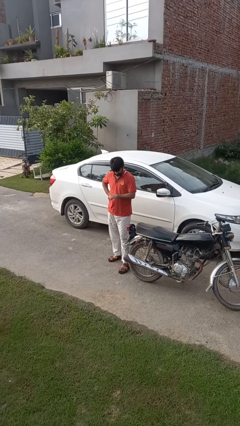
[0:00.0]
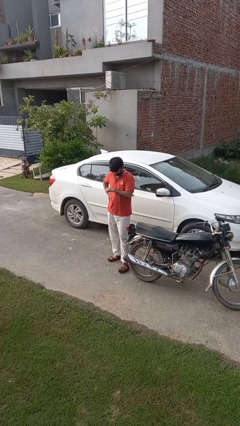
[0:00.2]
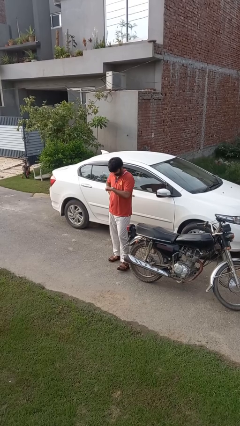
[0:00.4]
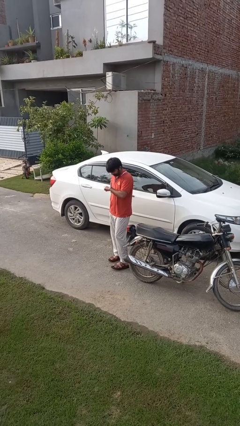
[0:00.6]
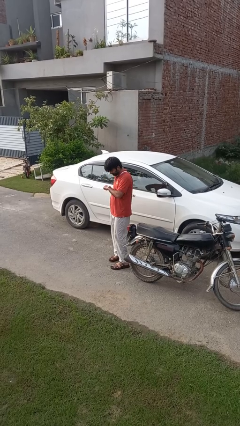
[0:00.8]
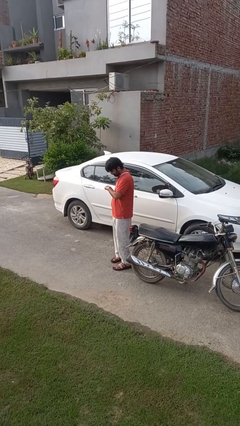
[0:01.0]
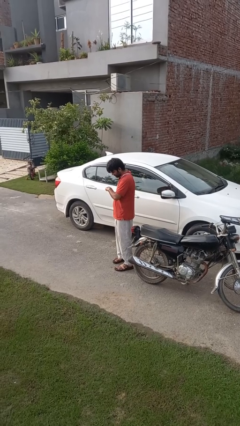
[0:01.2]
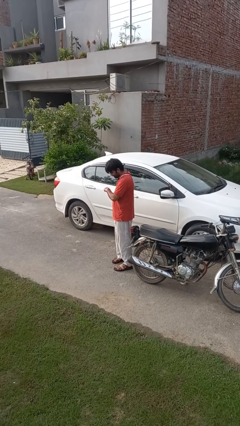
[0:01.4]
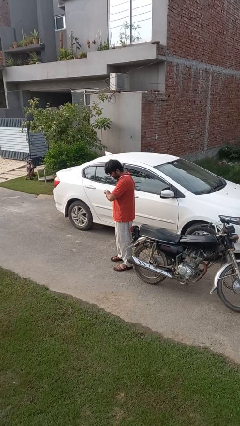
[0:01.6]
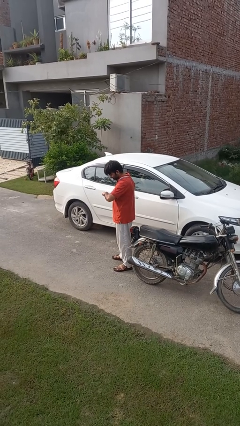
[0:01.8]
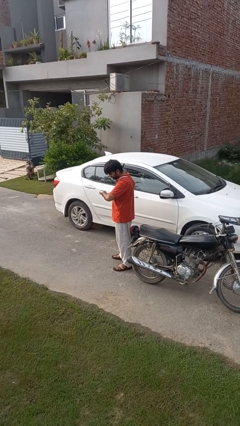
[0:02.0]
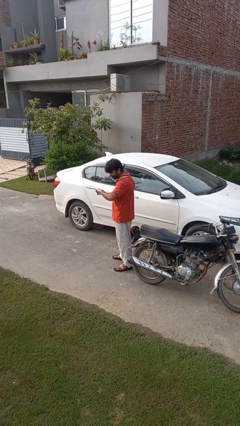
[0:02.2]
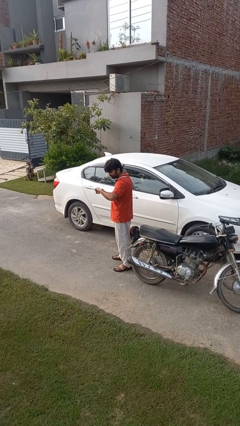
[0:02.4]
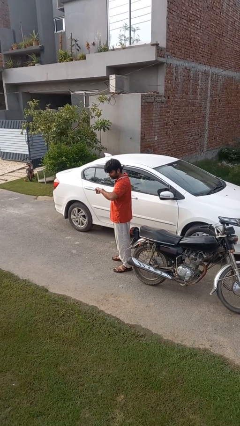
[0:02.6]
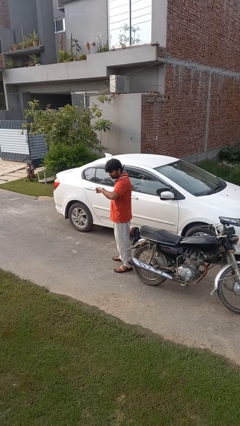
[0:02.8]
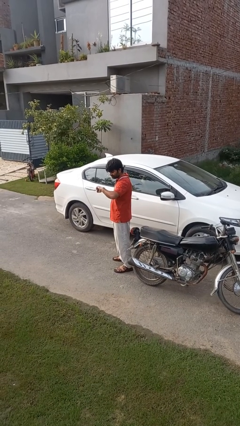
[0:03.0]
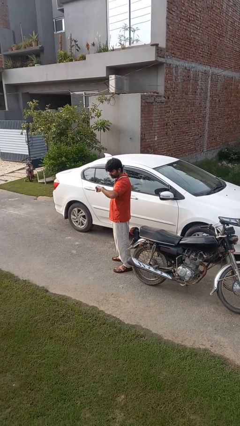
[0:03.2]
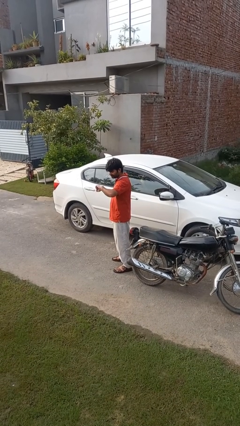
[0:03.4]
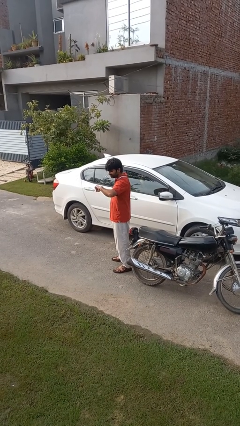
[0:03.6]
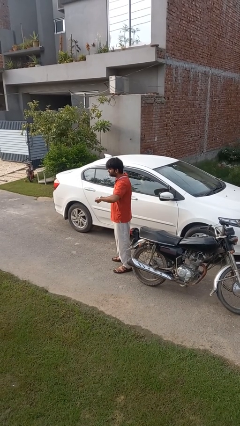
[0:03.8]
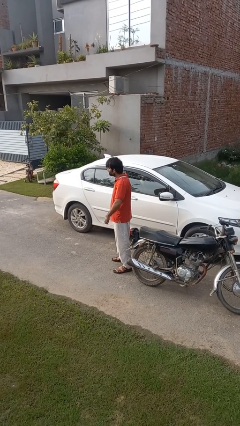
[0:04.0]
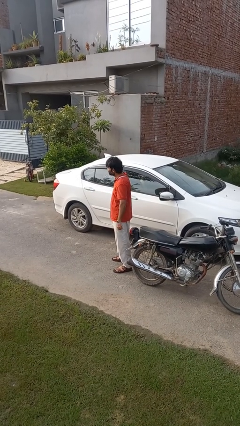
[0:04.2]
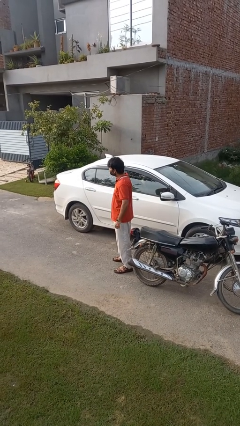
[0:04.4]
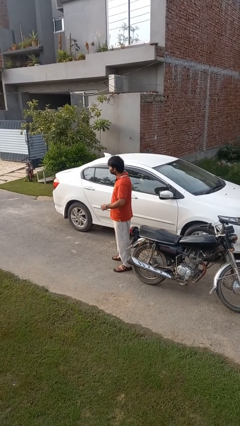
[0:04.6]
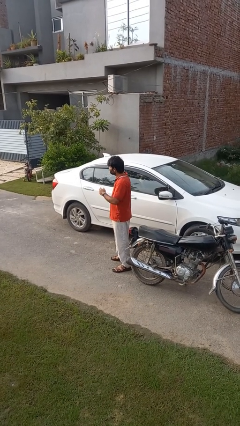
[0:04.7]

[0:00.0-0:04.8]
person looks at wristwatch

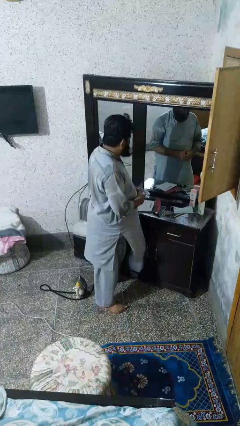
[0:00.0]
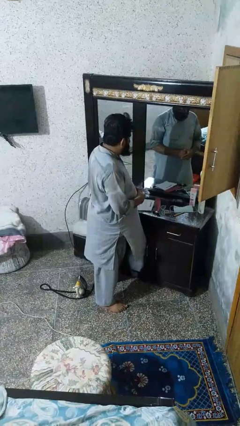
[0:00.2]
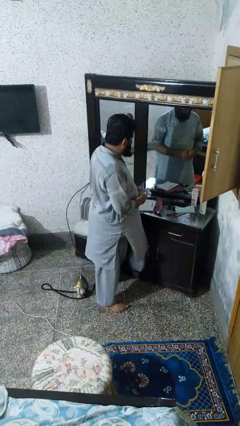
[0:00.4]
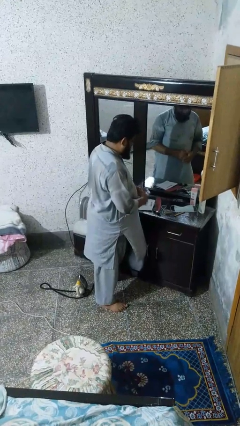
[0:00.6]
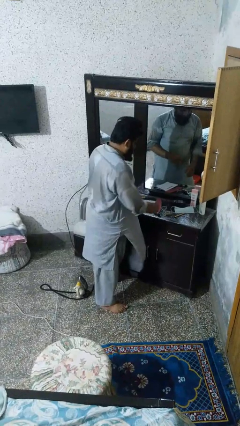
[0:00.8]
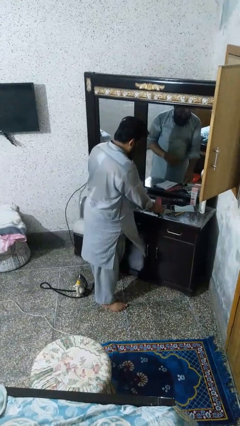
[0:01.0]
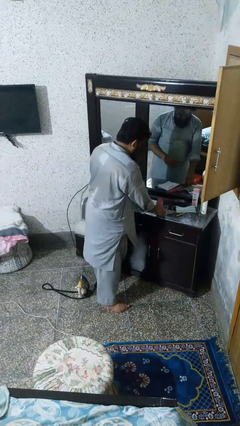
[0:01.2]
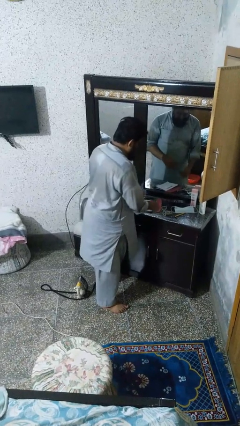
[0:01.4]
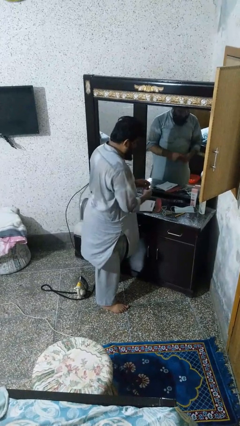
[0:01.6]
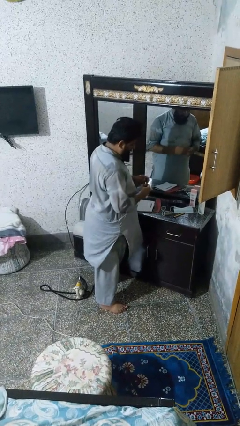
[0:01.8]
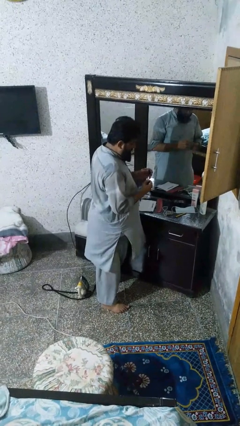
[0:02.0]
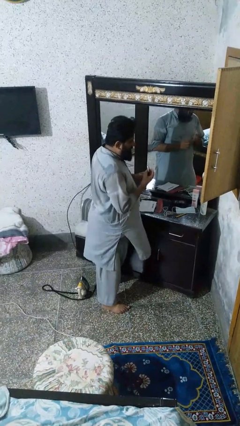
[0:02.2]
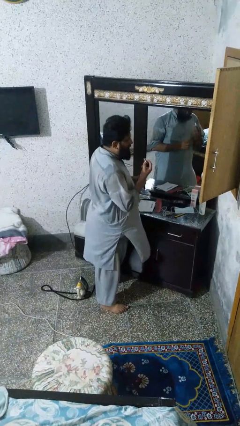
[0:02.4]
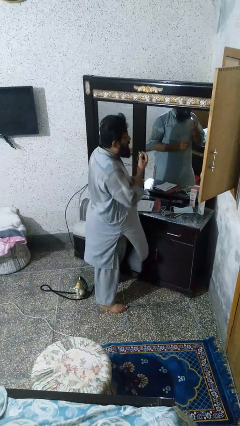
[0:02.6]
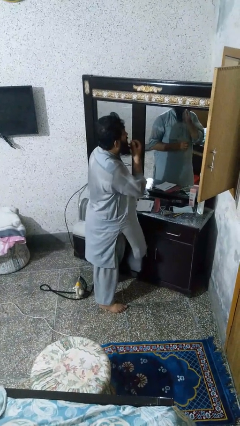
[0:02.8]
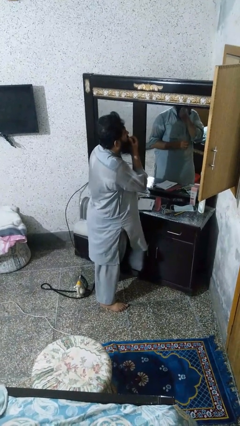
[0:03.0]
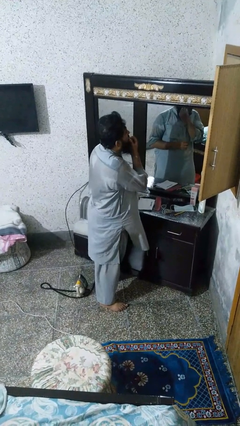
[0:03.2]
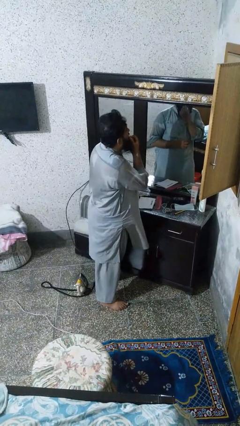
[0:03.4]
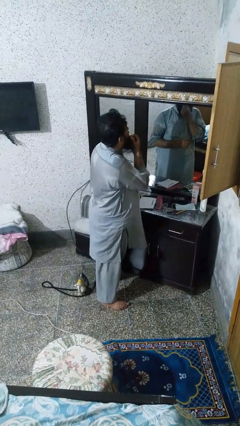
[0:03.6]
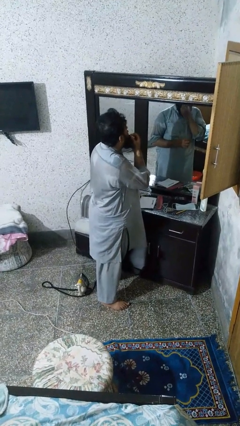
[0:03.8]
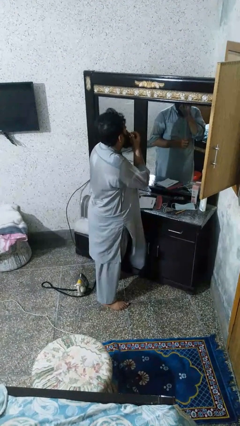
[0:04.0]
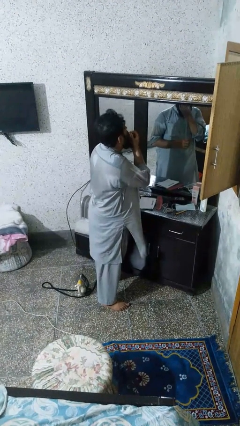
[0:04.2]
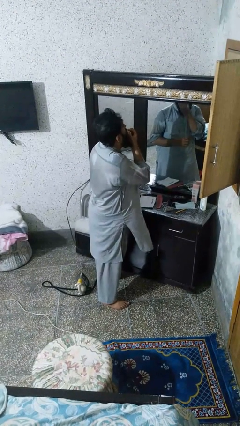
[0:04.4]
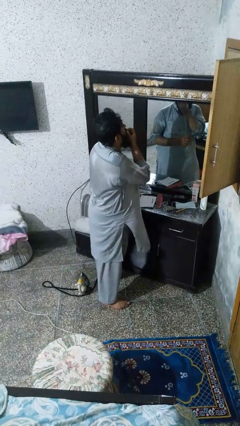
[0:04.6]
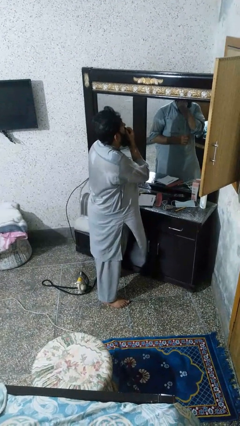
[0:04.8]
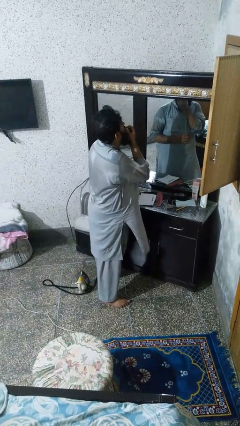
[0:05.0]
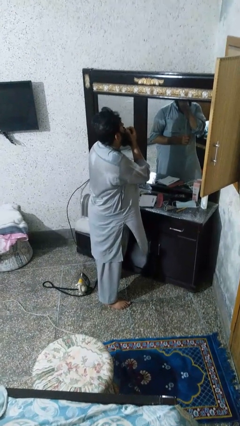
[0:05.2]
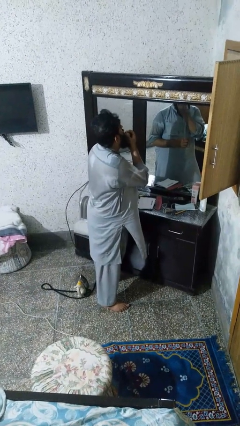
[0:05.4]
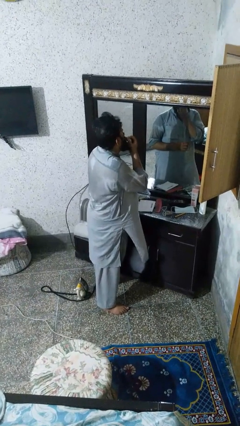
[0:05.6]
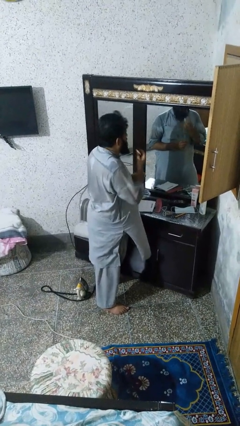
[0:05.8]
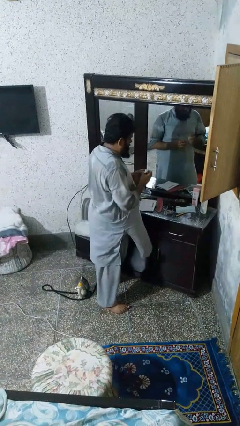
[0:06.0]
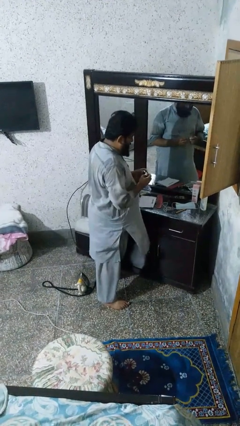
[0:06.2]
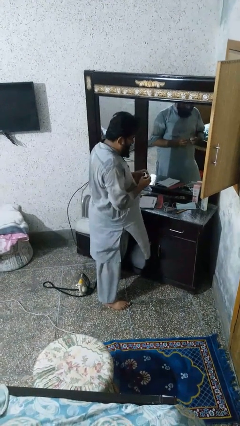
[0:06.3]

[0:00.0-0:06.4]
person applies lip makeup

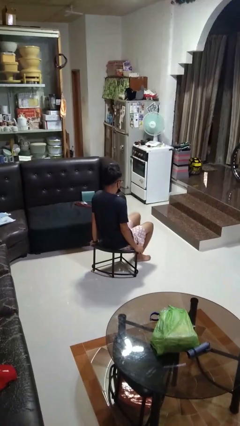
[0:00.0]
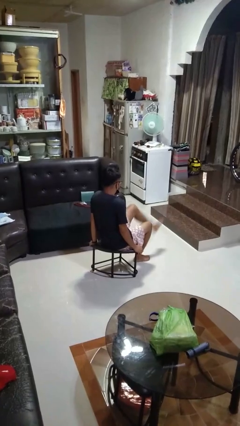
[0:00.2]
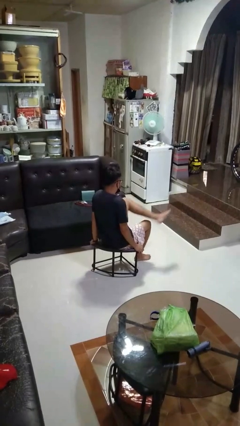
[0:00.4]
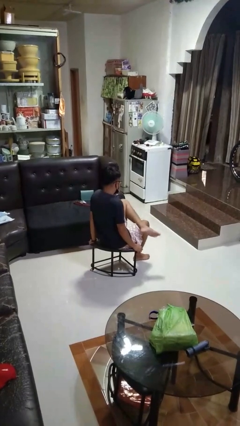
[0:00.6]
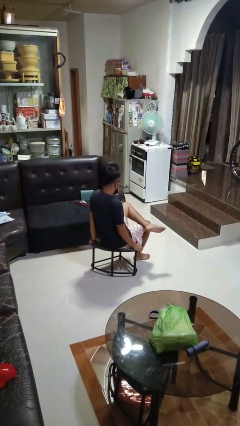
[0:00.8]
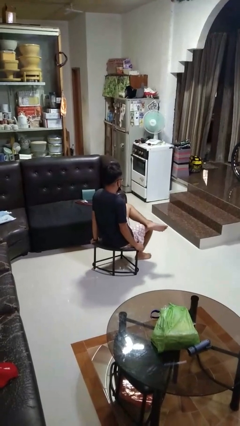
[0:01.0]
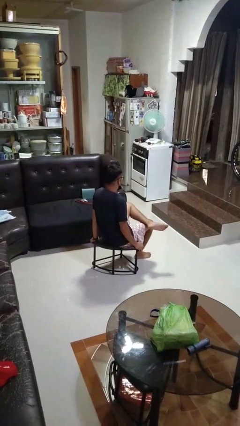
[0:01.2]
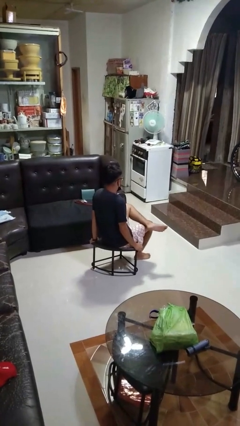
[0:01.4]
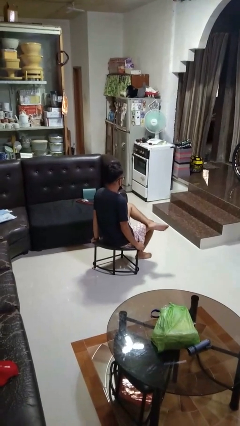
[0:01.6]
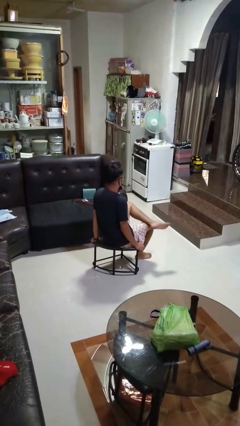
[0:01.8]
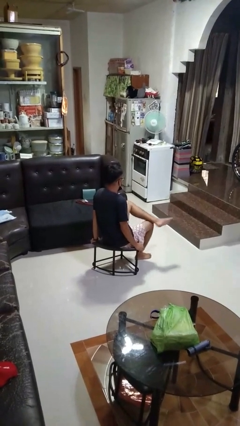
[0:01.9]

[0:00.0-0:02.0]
person crosses legs

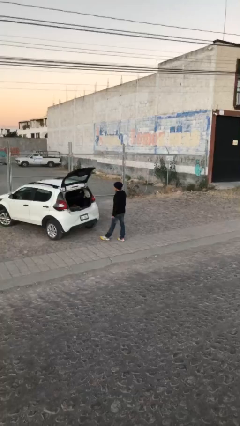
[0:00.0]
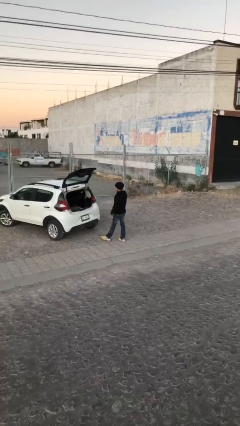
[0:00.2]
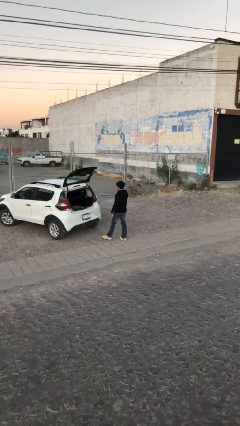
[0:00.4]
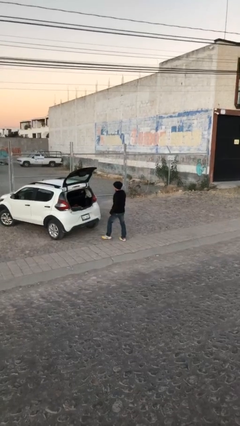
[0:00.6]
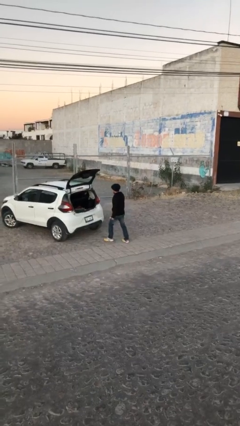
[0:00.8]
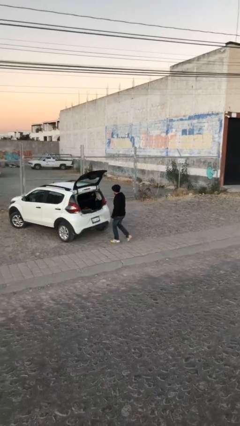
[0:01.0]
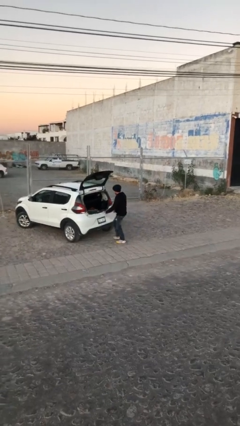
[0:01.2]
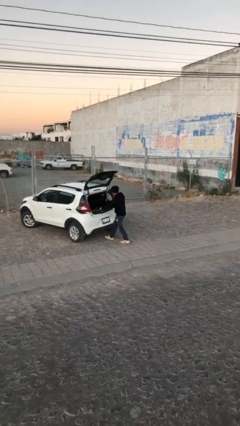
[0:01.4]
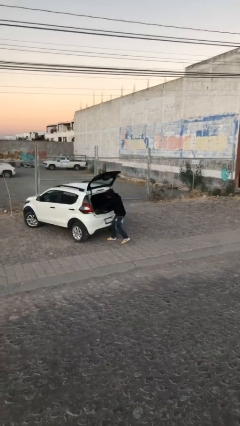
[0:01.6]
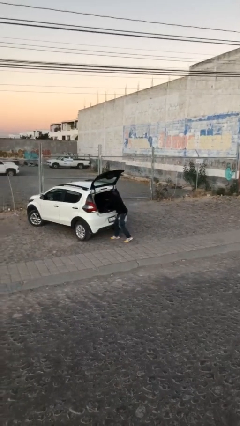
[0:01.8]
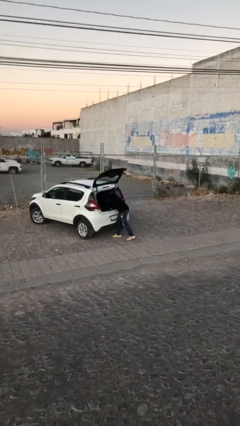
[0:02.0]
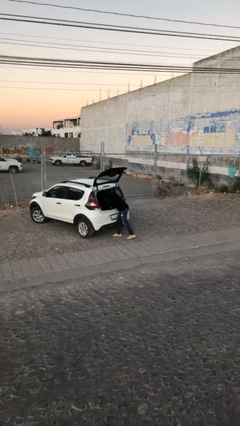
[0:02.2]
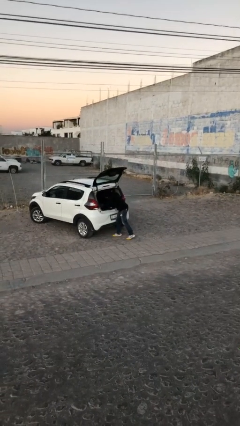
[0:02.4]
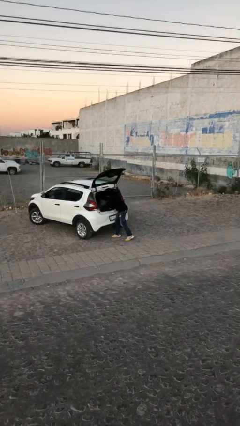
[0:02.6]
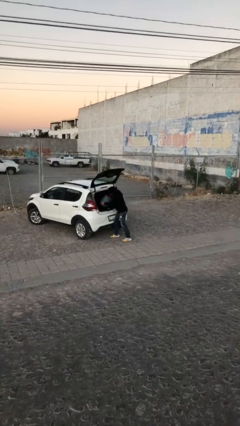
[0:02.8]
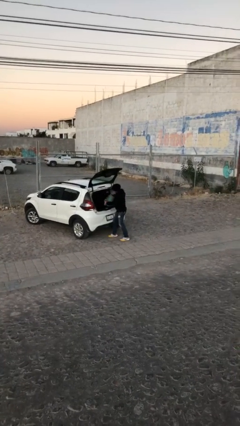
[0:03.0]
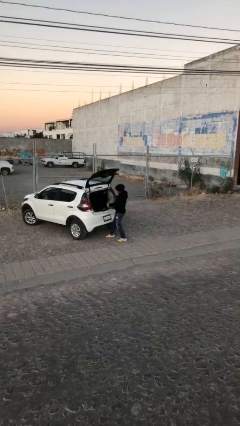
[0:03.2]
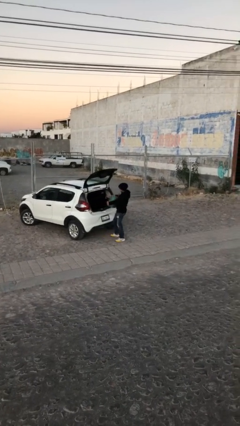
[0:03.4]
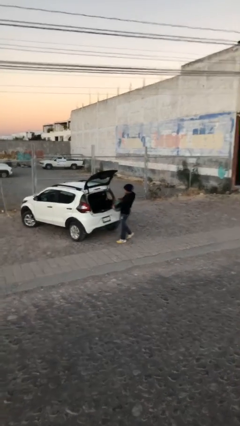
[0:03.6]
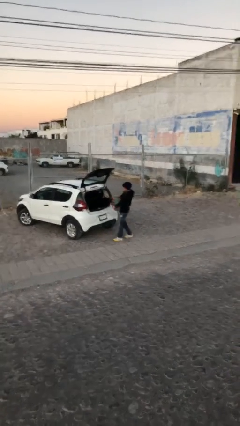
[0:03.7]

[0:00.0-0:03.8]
person unloads car

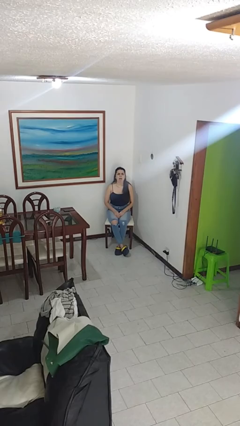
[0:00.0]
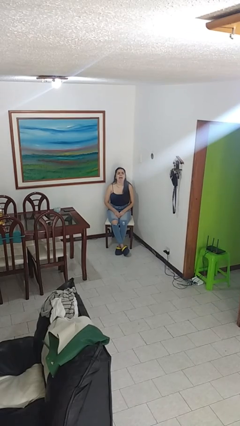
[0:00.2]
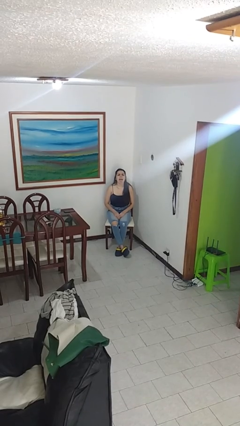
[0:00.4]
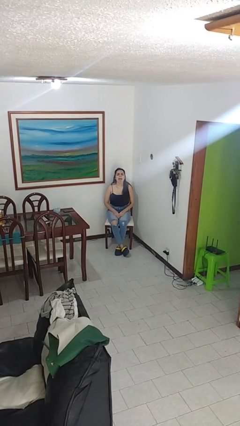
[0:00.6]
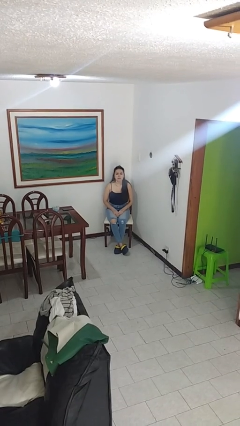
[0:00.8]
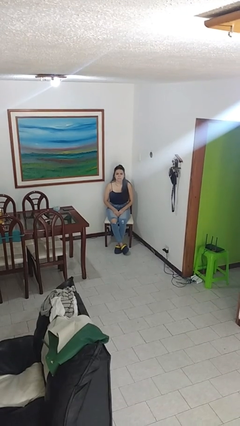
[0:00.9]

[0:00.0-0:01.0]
person sticks out tongue
